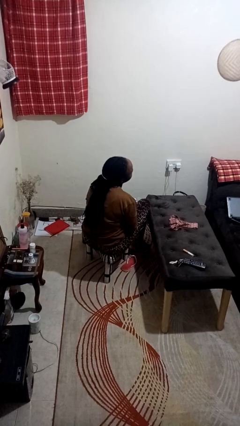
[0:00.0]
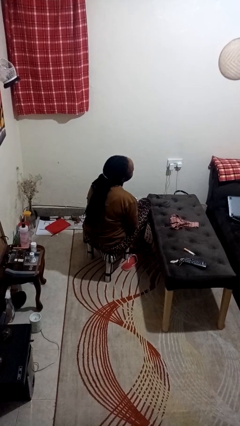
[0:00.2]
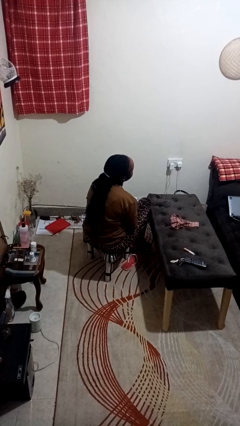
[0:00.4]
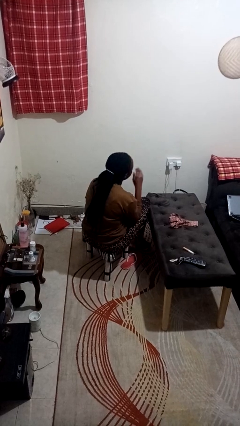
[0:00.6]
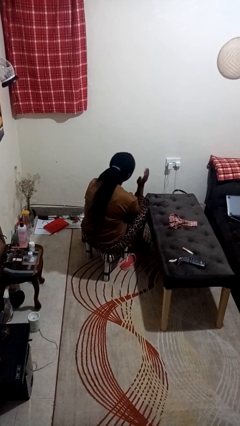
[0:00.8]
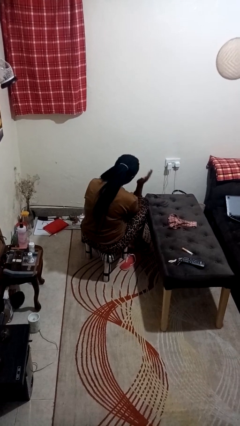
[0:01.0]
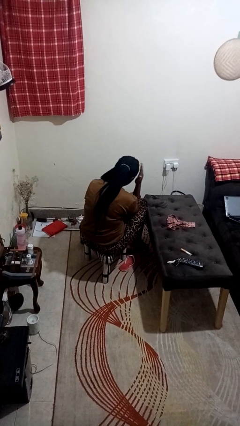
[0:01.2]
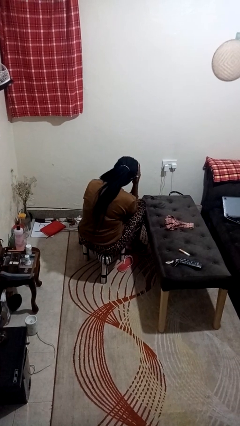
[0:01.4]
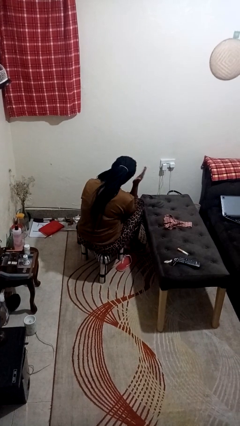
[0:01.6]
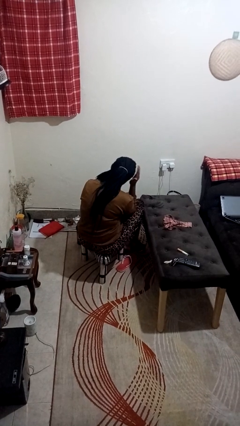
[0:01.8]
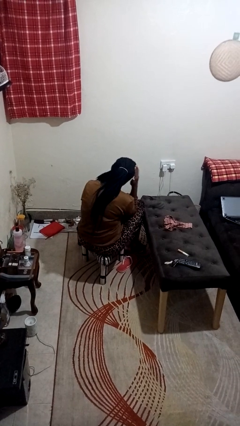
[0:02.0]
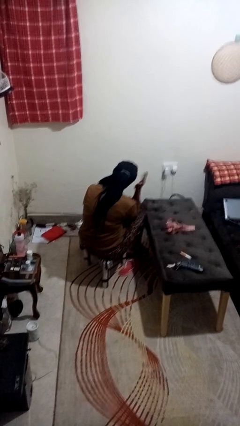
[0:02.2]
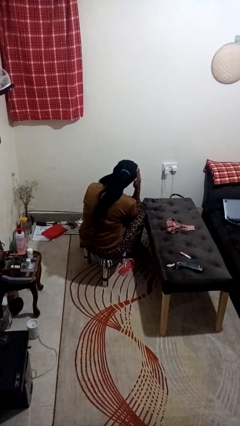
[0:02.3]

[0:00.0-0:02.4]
person pats head

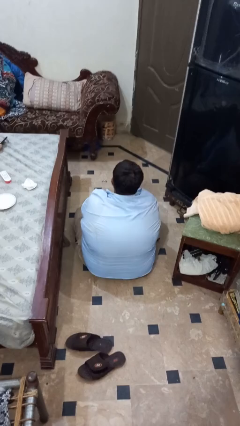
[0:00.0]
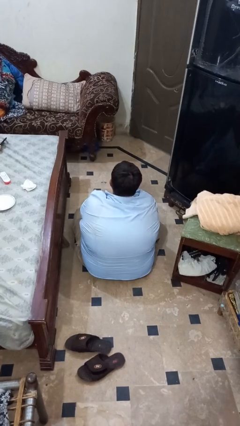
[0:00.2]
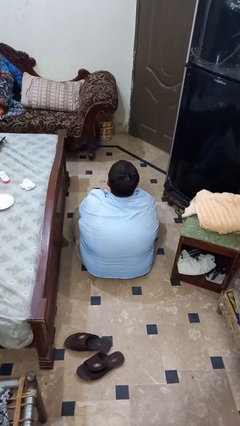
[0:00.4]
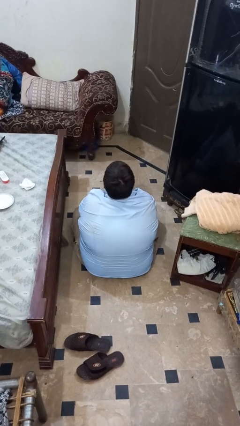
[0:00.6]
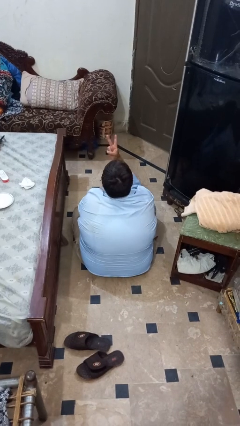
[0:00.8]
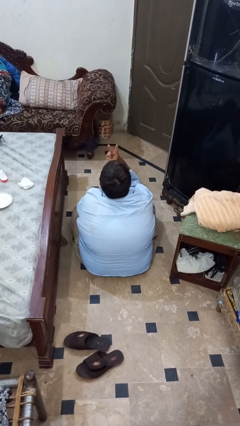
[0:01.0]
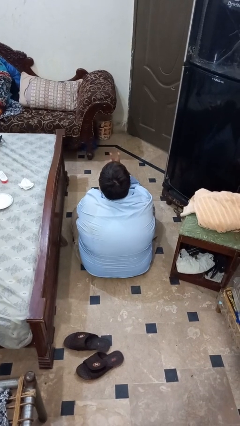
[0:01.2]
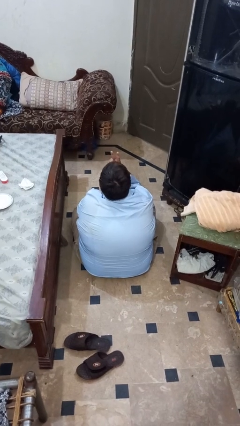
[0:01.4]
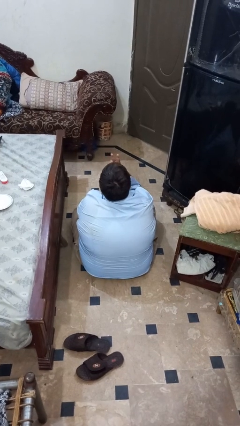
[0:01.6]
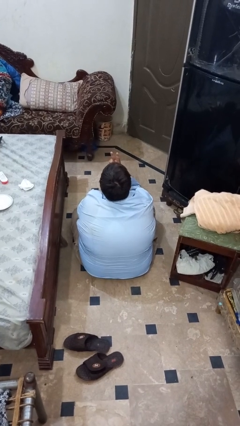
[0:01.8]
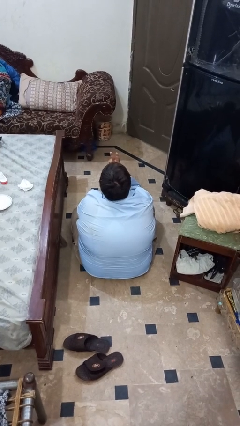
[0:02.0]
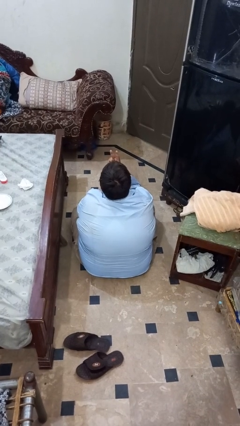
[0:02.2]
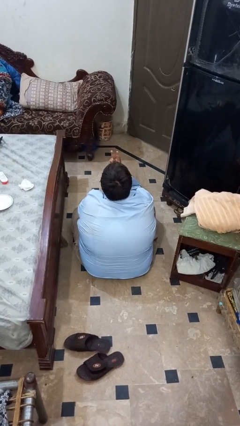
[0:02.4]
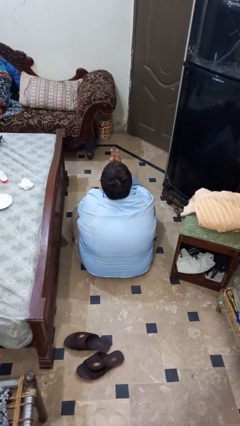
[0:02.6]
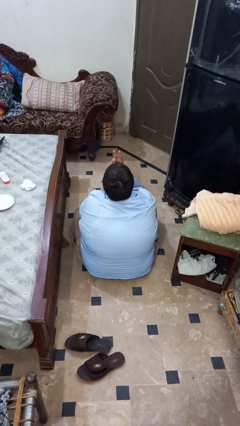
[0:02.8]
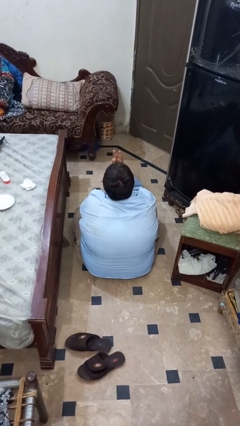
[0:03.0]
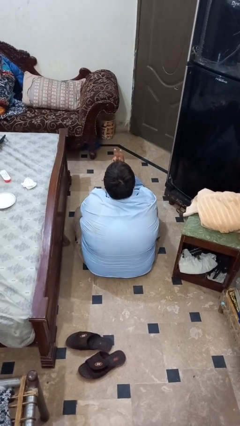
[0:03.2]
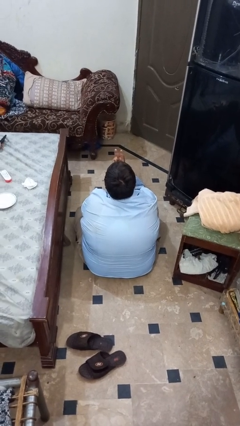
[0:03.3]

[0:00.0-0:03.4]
person gestures watch closely

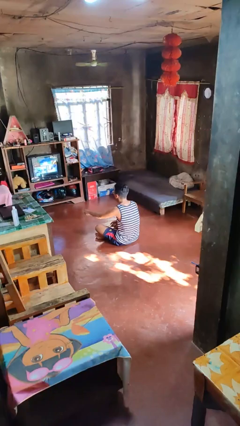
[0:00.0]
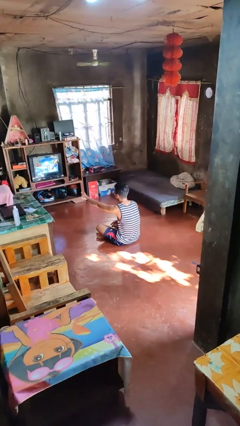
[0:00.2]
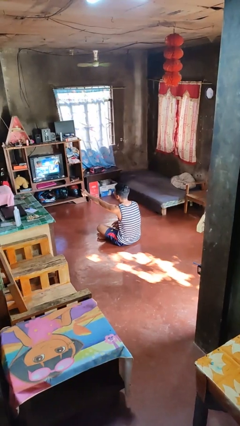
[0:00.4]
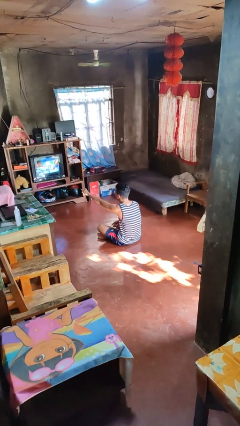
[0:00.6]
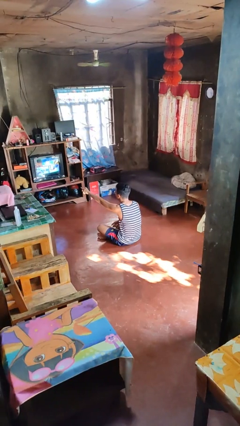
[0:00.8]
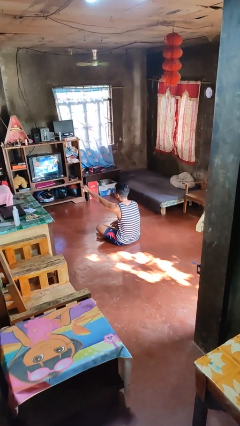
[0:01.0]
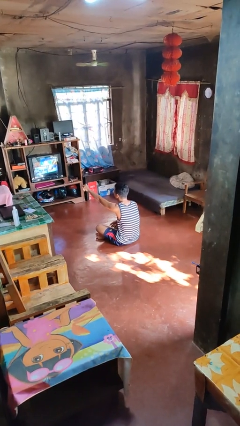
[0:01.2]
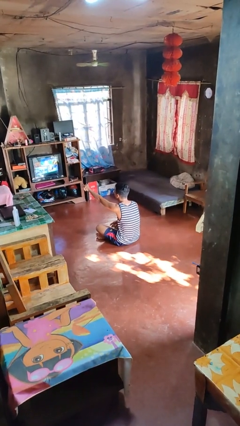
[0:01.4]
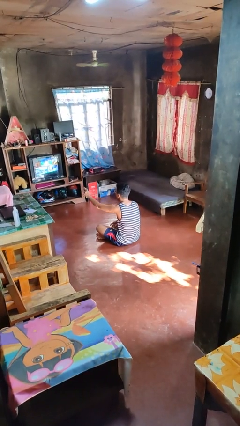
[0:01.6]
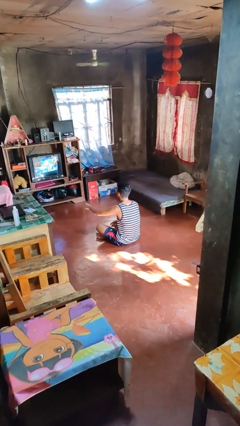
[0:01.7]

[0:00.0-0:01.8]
person uses television remote

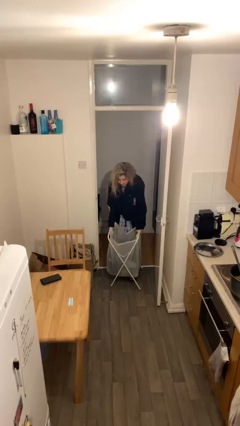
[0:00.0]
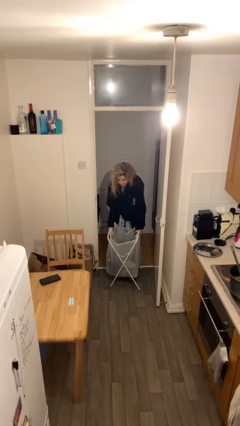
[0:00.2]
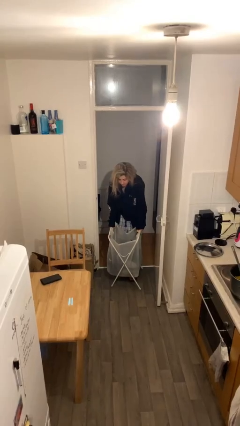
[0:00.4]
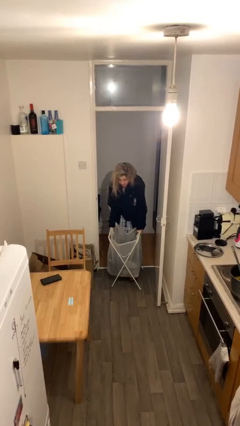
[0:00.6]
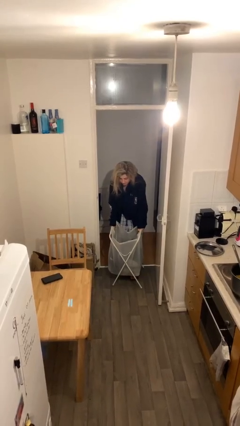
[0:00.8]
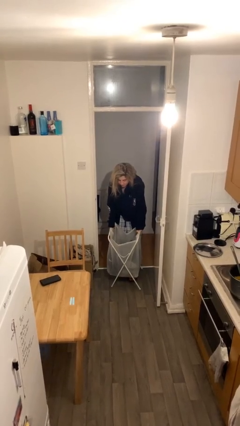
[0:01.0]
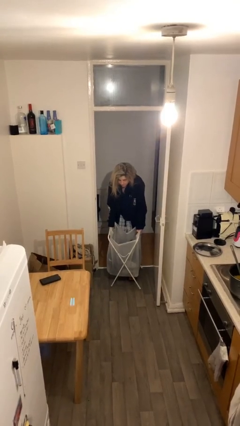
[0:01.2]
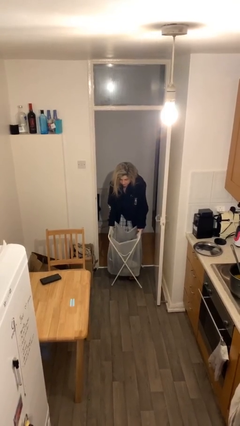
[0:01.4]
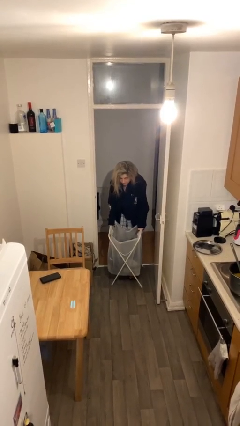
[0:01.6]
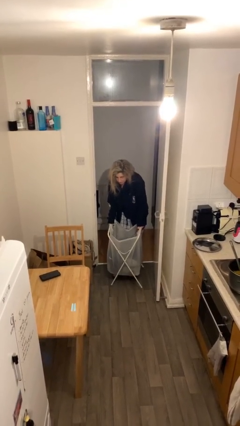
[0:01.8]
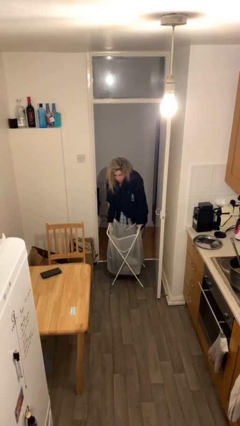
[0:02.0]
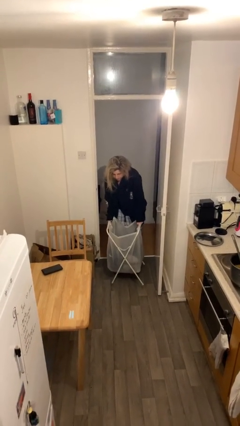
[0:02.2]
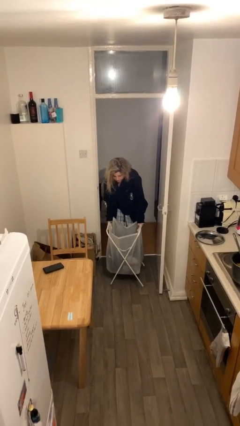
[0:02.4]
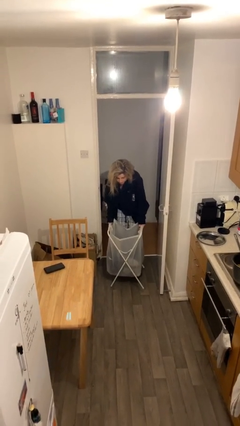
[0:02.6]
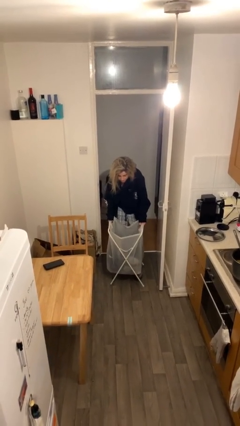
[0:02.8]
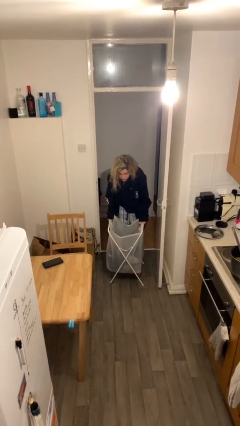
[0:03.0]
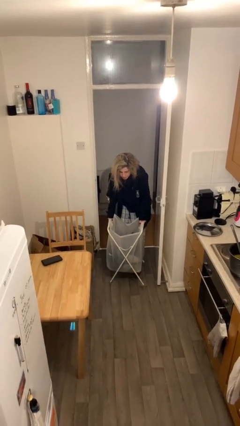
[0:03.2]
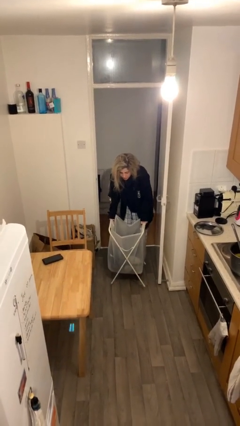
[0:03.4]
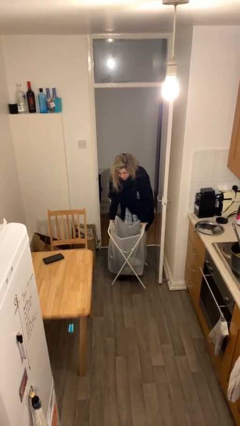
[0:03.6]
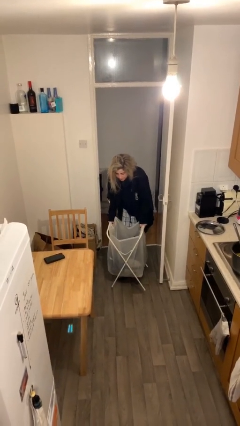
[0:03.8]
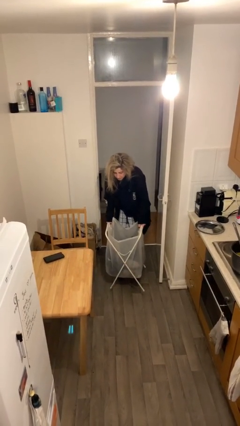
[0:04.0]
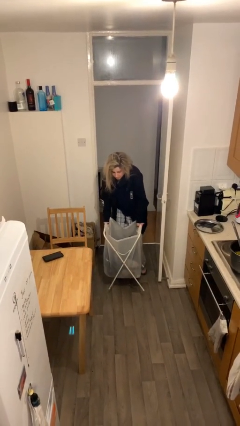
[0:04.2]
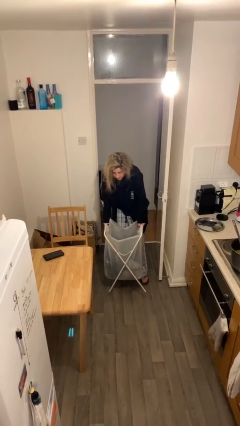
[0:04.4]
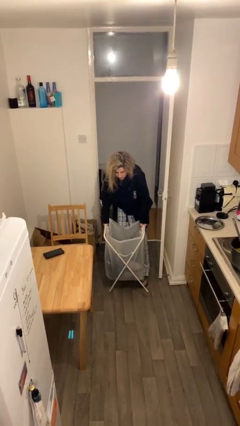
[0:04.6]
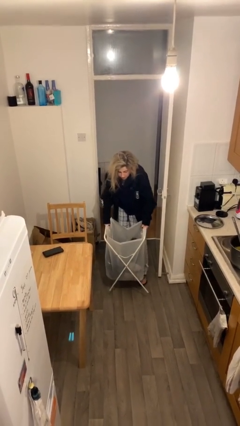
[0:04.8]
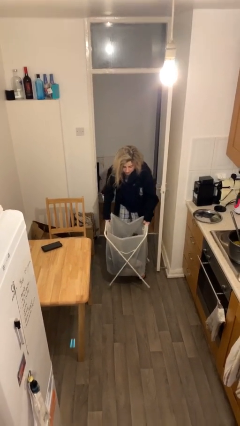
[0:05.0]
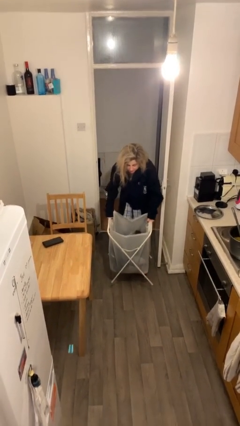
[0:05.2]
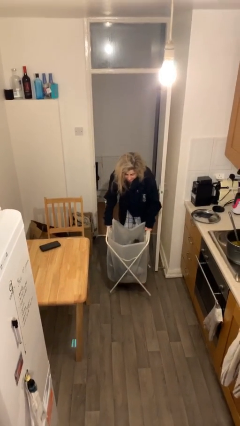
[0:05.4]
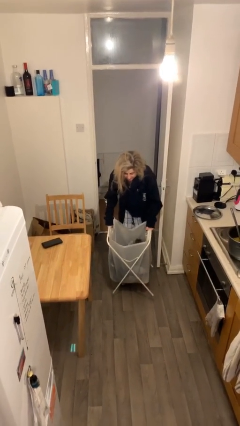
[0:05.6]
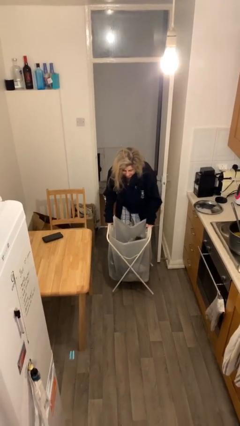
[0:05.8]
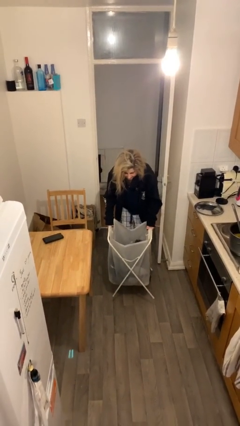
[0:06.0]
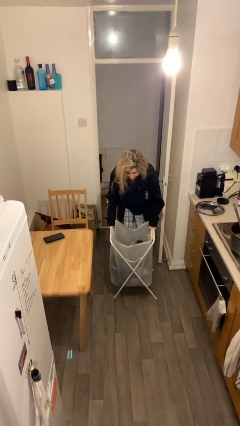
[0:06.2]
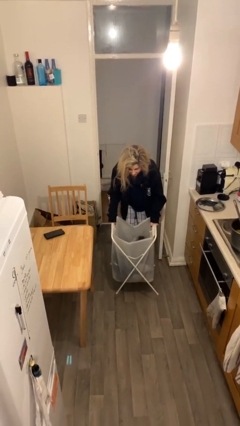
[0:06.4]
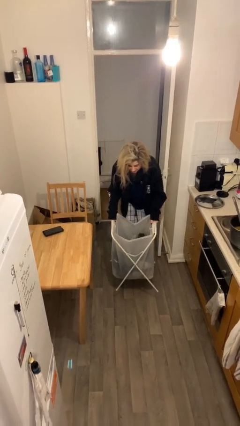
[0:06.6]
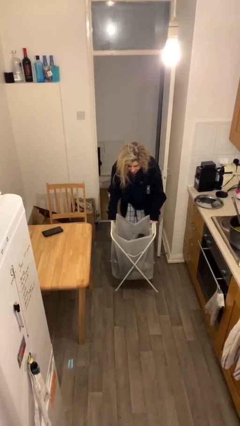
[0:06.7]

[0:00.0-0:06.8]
person carries heavy object

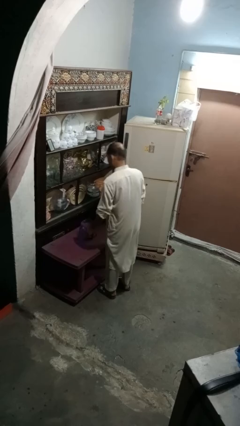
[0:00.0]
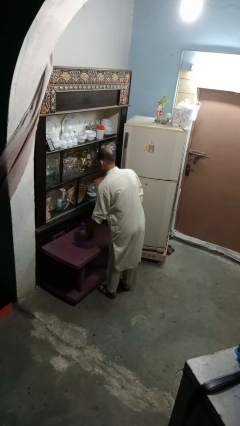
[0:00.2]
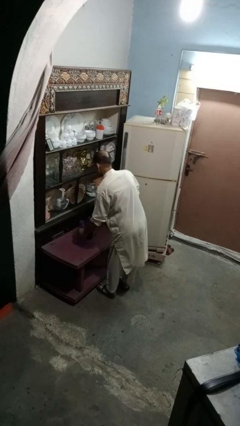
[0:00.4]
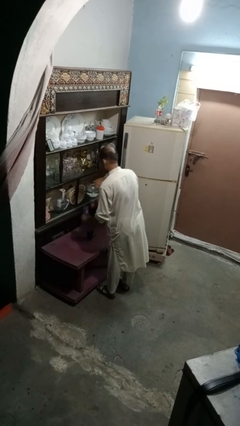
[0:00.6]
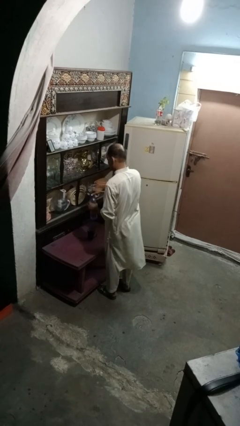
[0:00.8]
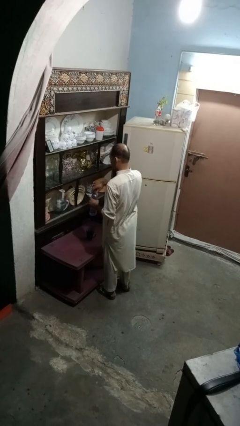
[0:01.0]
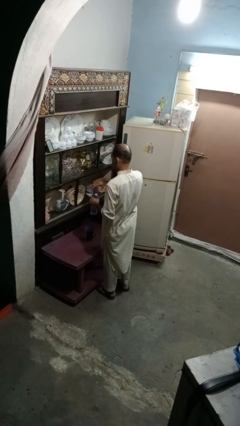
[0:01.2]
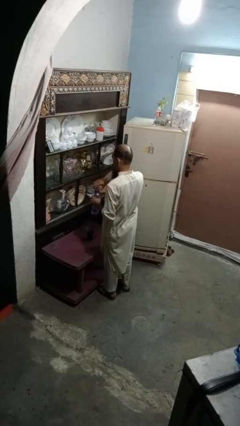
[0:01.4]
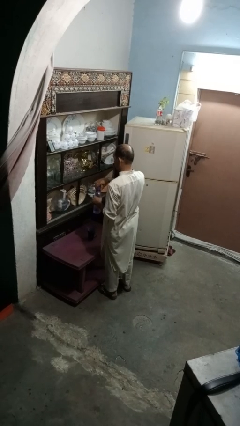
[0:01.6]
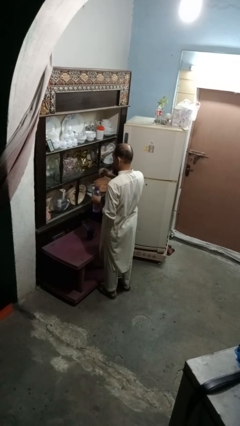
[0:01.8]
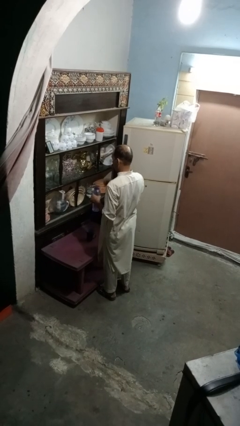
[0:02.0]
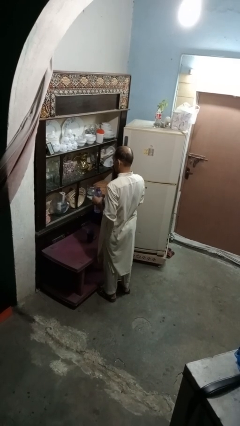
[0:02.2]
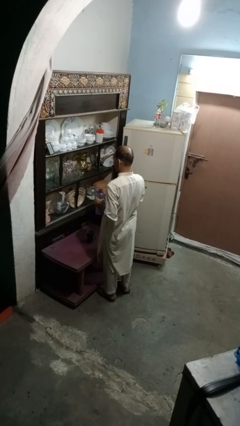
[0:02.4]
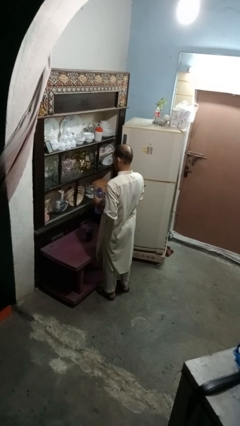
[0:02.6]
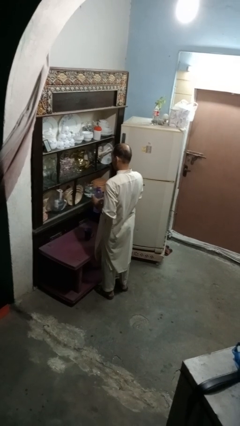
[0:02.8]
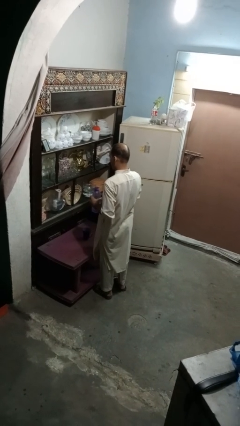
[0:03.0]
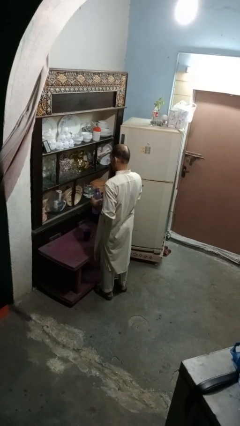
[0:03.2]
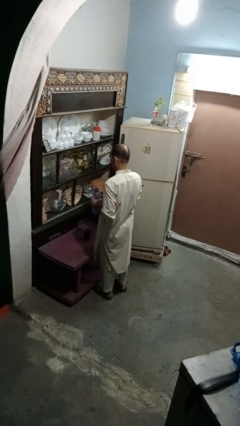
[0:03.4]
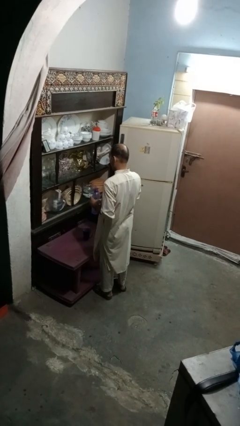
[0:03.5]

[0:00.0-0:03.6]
person unscrews lid from bottle
